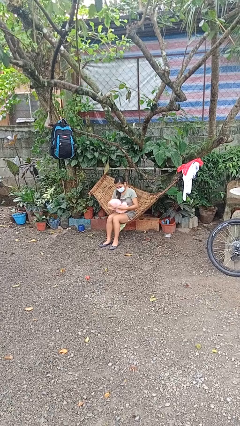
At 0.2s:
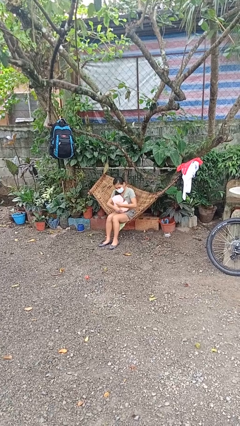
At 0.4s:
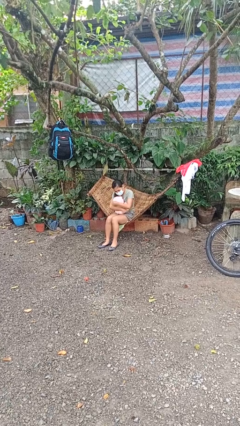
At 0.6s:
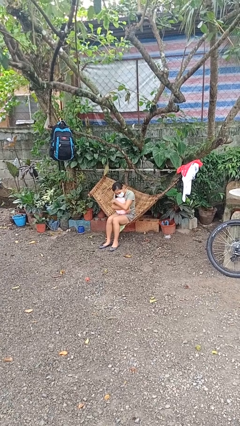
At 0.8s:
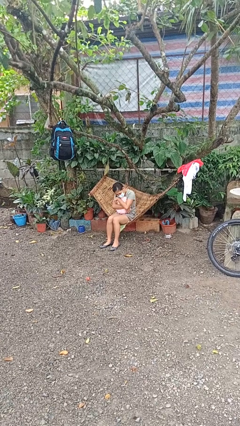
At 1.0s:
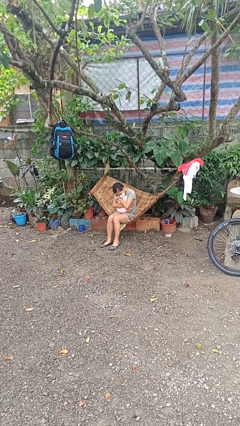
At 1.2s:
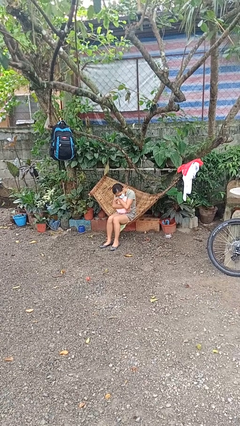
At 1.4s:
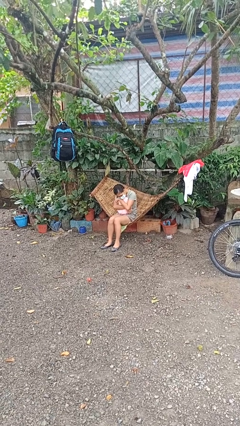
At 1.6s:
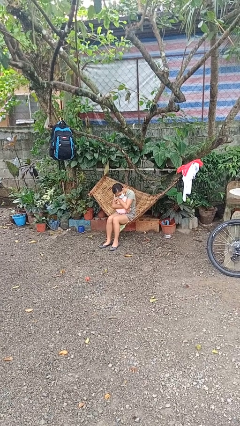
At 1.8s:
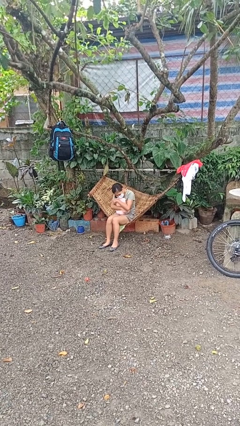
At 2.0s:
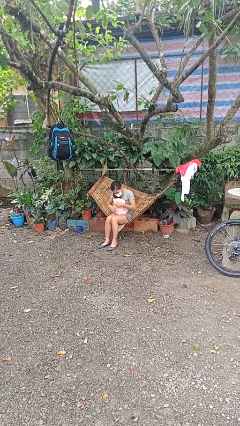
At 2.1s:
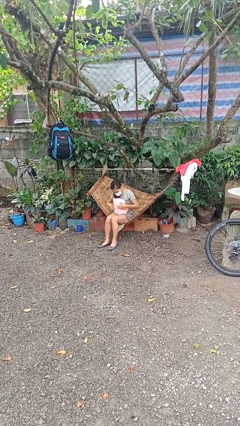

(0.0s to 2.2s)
person hugs stuffed animal

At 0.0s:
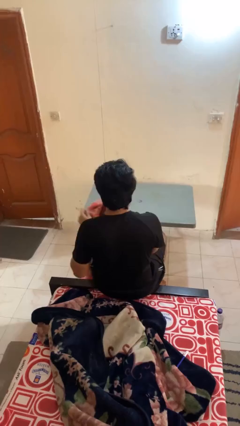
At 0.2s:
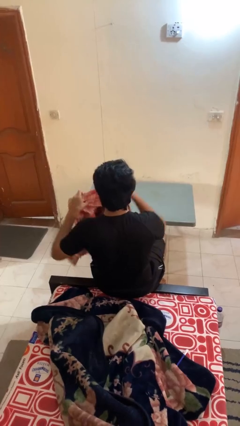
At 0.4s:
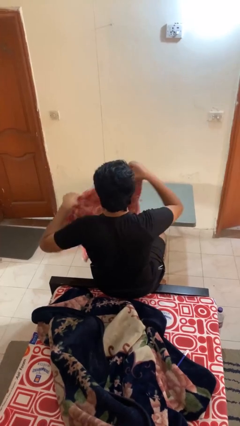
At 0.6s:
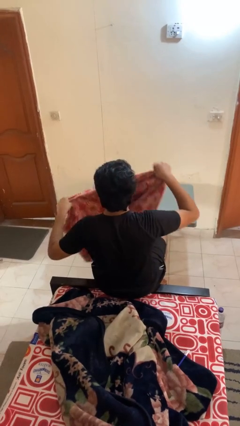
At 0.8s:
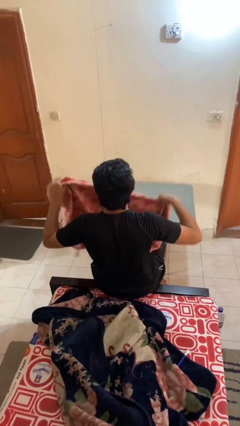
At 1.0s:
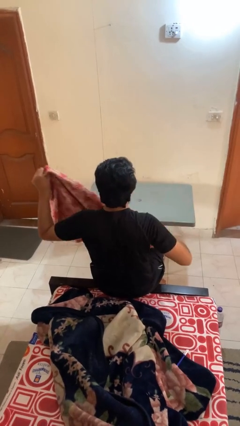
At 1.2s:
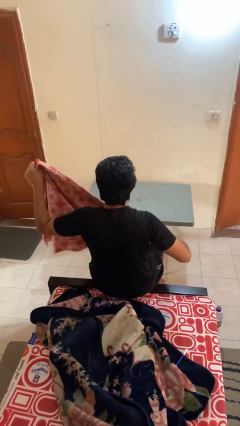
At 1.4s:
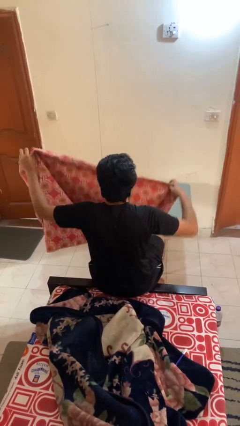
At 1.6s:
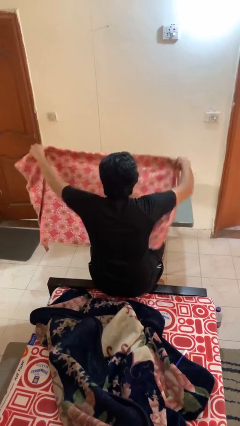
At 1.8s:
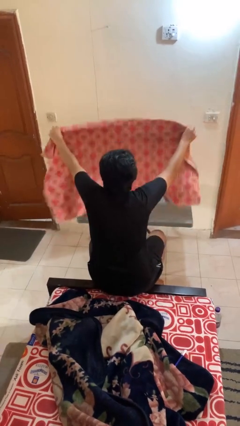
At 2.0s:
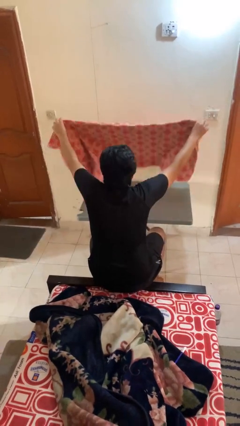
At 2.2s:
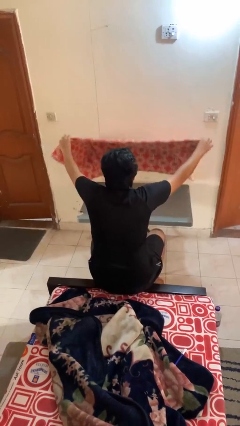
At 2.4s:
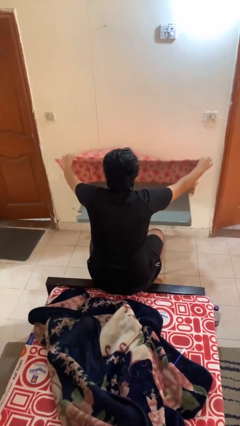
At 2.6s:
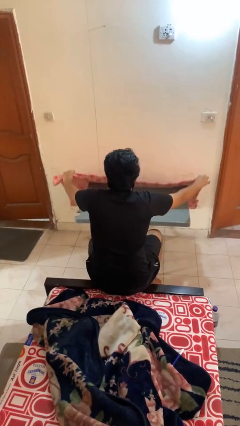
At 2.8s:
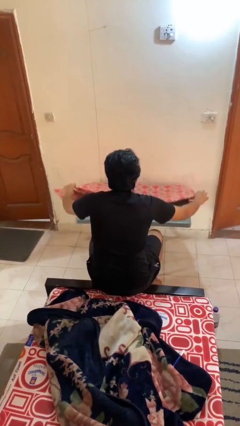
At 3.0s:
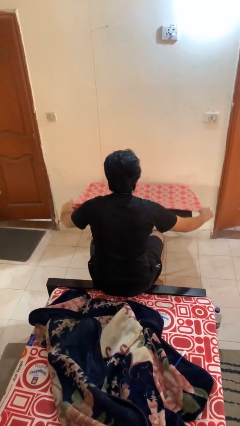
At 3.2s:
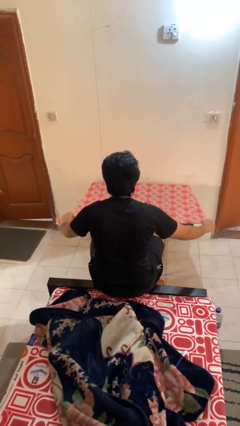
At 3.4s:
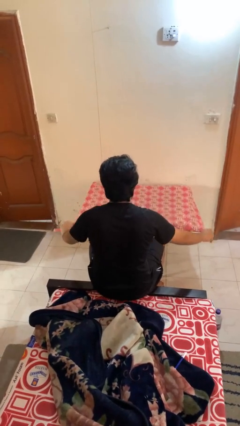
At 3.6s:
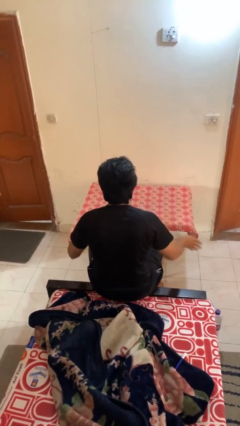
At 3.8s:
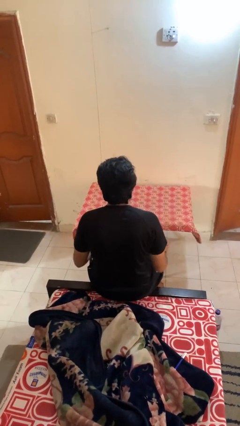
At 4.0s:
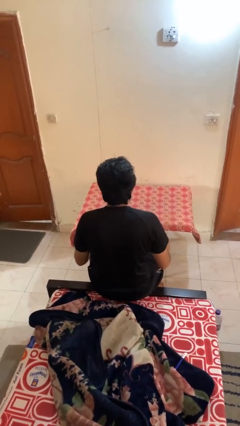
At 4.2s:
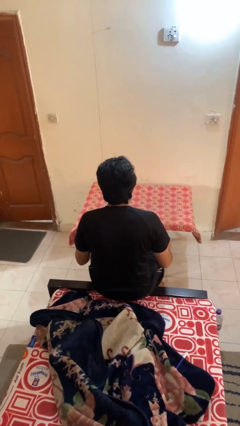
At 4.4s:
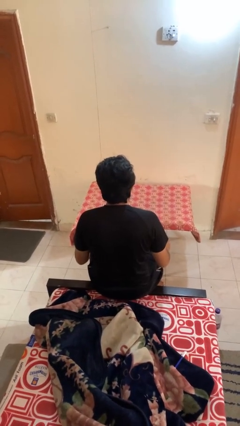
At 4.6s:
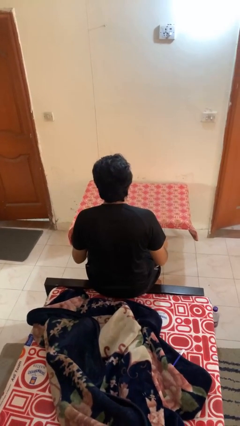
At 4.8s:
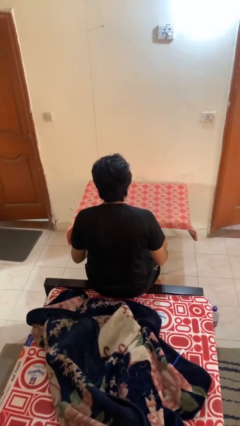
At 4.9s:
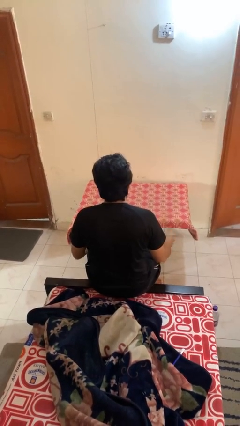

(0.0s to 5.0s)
person spreads tablecloth

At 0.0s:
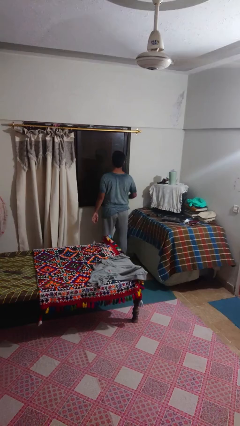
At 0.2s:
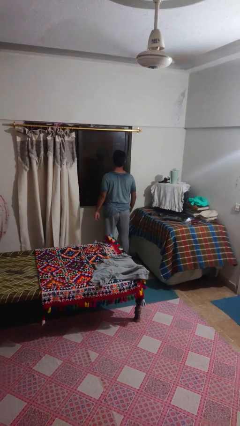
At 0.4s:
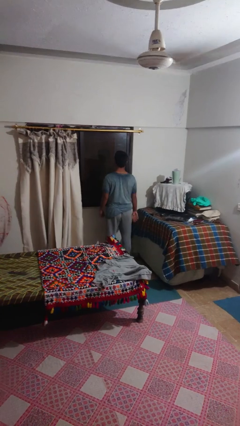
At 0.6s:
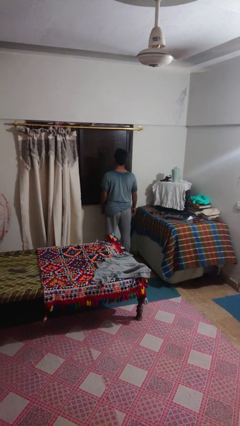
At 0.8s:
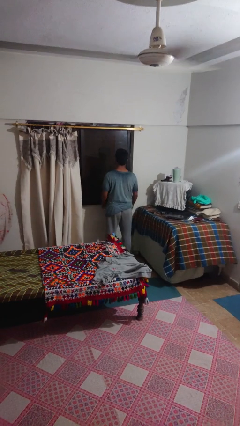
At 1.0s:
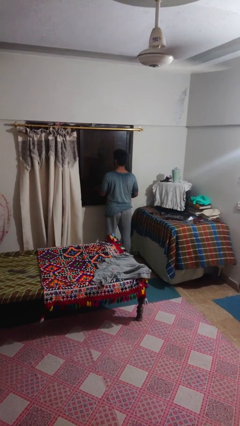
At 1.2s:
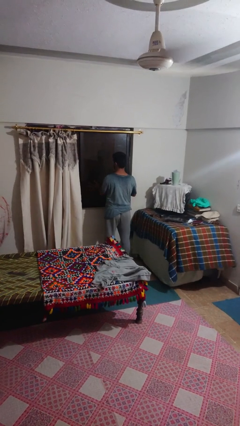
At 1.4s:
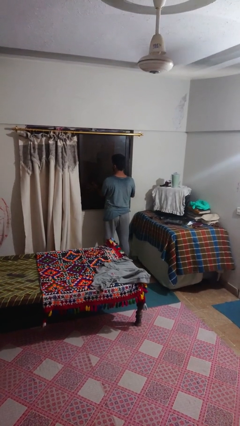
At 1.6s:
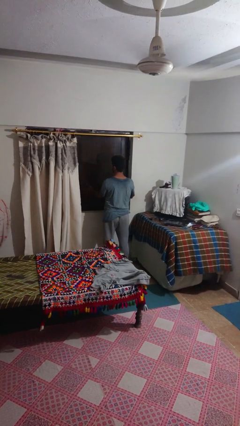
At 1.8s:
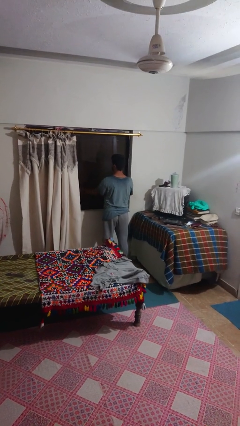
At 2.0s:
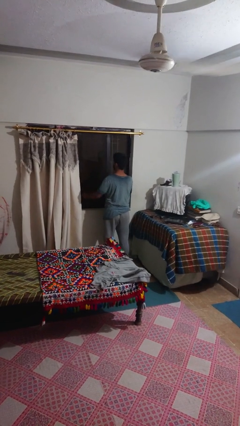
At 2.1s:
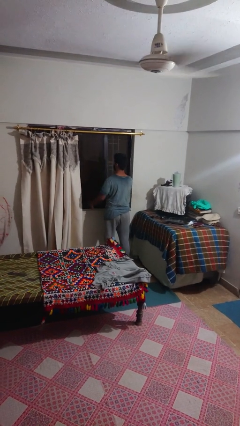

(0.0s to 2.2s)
person opens home window

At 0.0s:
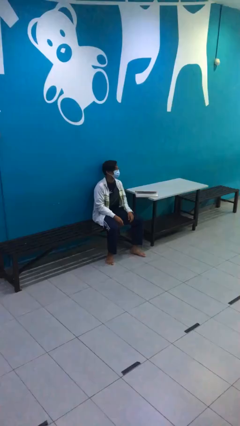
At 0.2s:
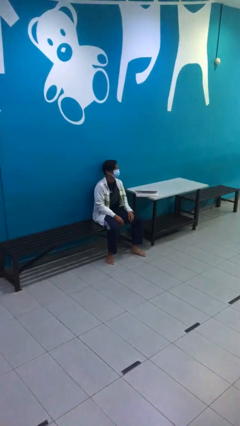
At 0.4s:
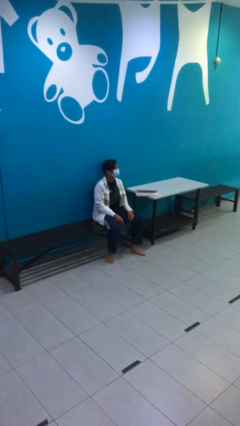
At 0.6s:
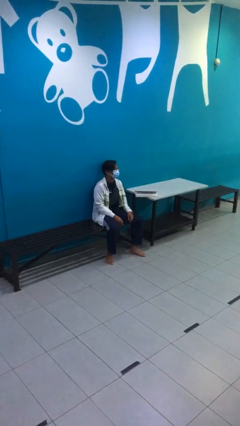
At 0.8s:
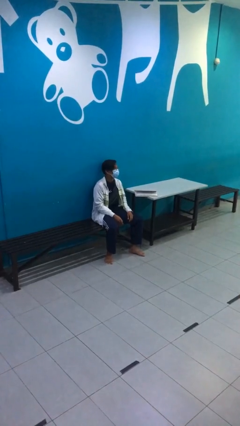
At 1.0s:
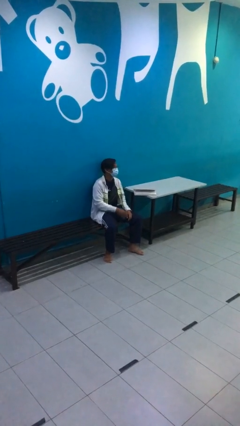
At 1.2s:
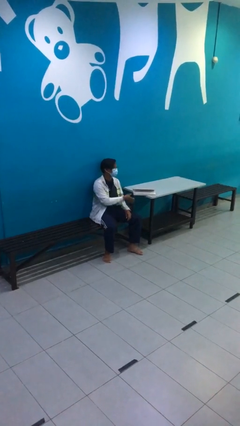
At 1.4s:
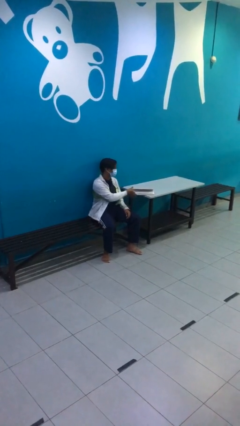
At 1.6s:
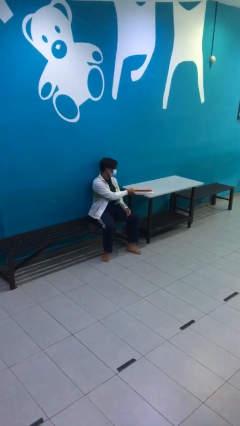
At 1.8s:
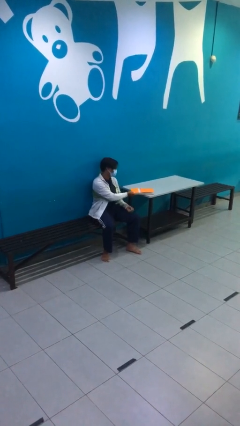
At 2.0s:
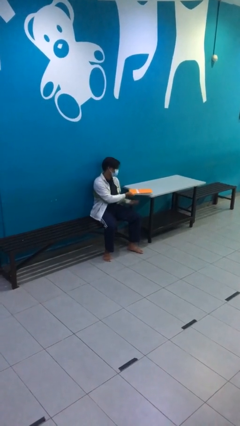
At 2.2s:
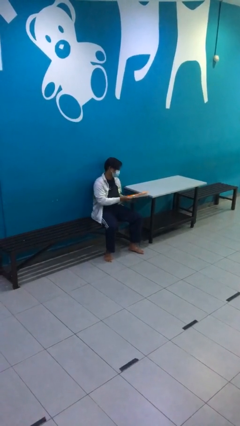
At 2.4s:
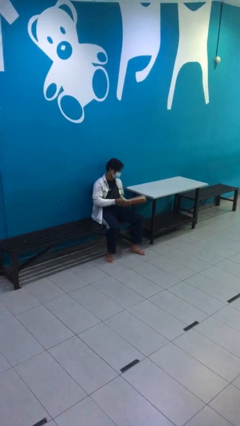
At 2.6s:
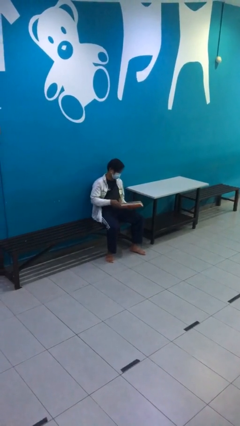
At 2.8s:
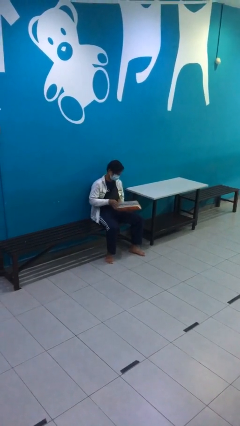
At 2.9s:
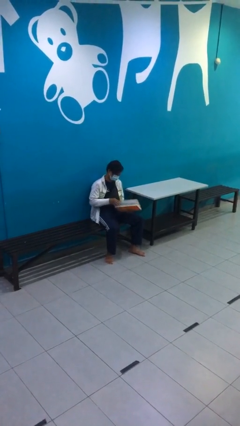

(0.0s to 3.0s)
person picks up object from table

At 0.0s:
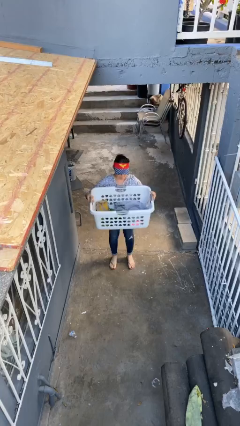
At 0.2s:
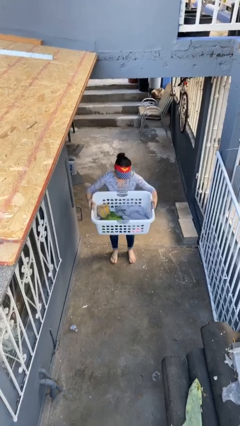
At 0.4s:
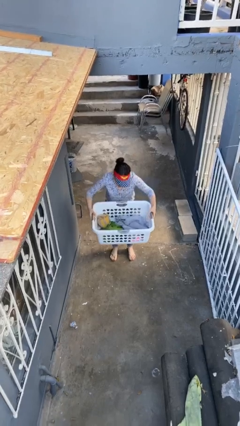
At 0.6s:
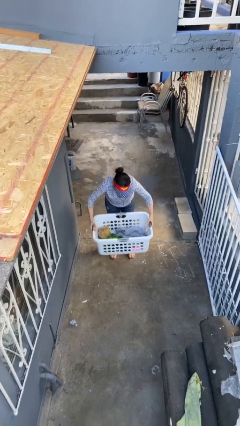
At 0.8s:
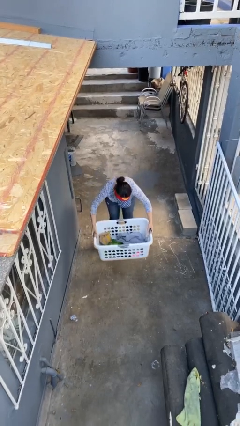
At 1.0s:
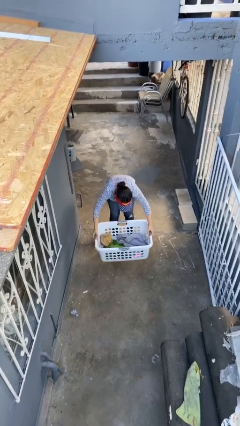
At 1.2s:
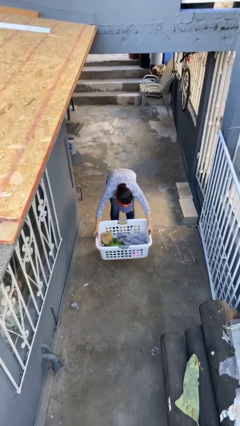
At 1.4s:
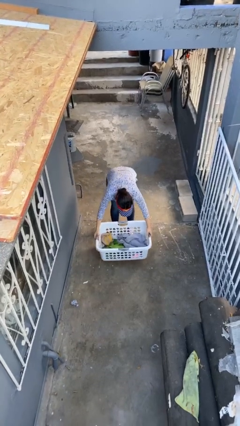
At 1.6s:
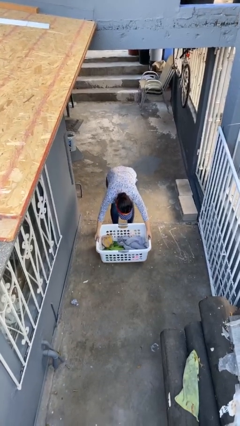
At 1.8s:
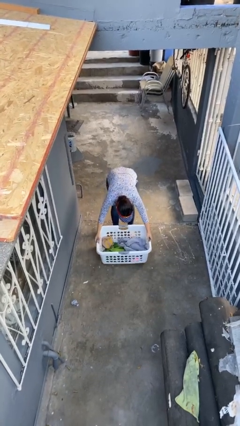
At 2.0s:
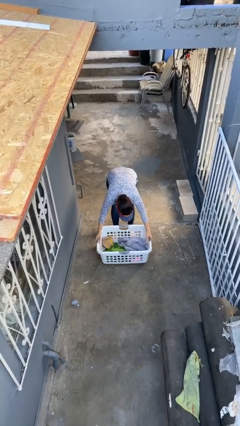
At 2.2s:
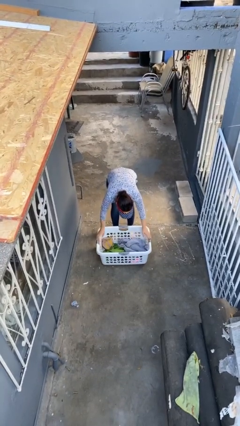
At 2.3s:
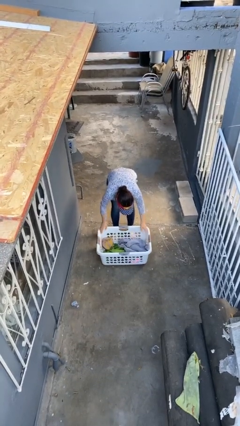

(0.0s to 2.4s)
person puts down object on floor

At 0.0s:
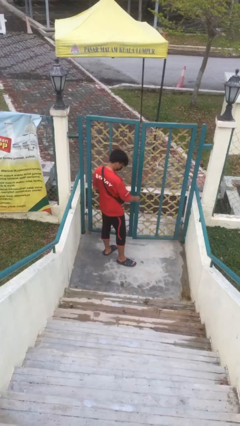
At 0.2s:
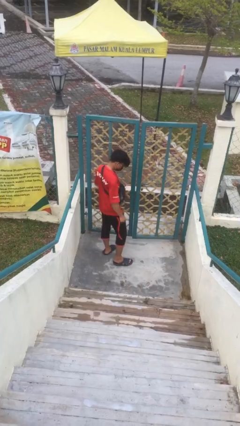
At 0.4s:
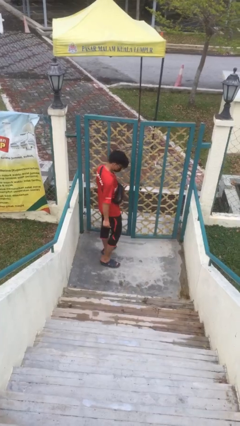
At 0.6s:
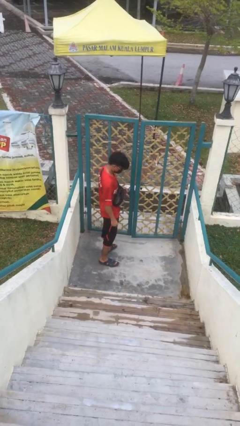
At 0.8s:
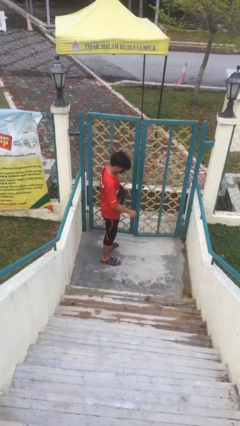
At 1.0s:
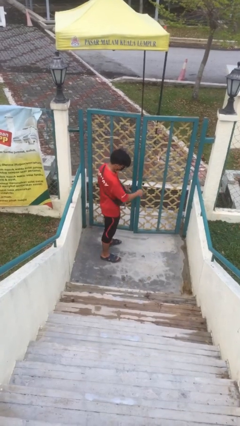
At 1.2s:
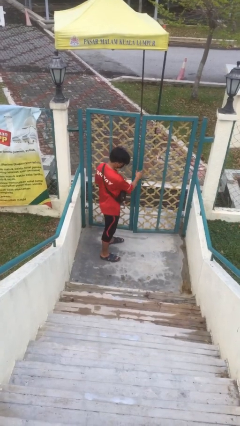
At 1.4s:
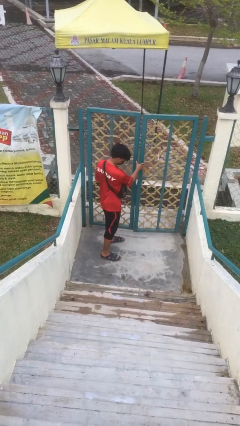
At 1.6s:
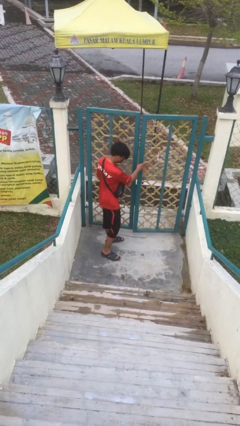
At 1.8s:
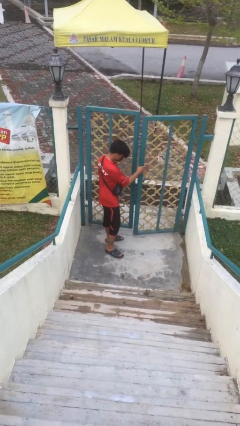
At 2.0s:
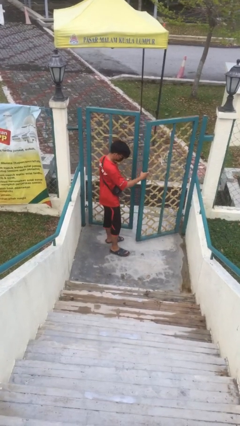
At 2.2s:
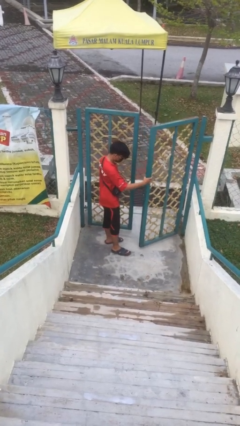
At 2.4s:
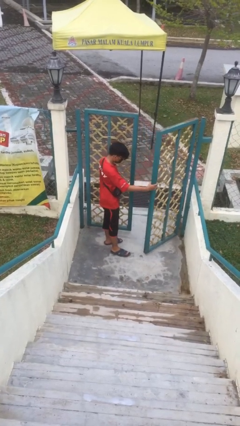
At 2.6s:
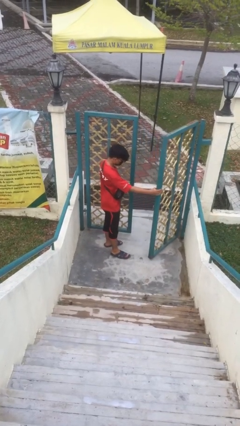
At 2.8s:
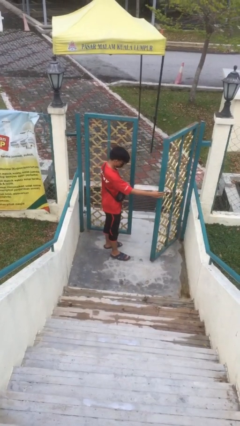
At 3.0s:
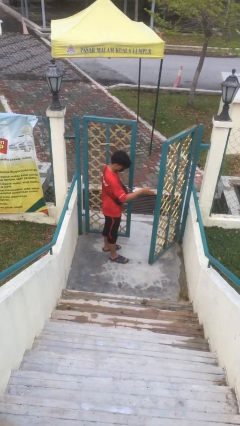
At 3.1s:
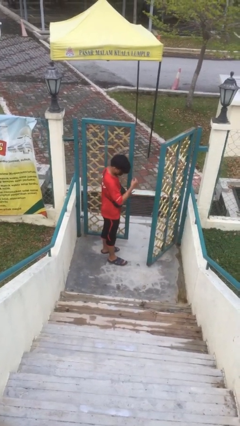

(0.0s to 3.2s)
person opens facility door
